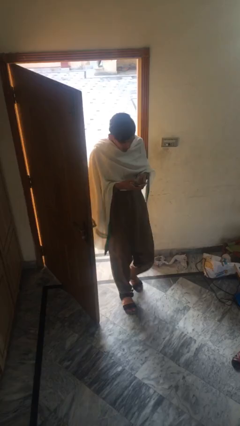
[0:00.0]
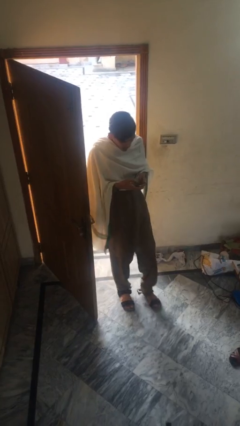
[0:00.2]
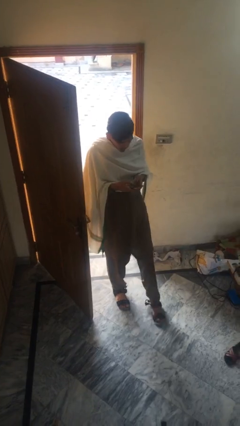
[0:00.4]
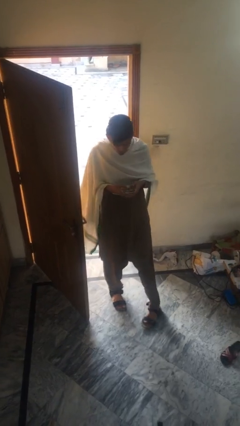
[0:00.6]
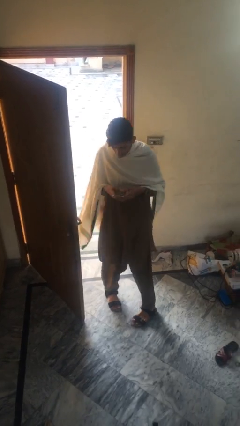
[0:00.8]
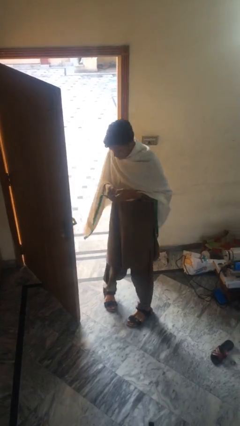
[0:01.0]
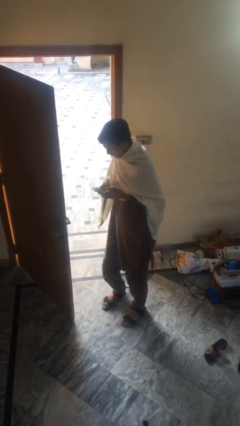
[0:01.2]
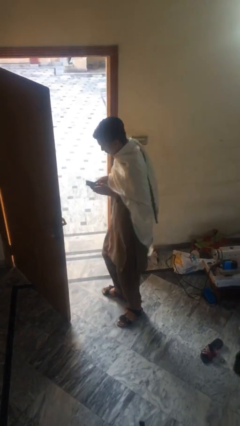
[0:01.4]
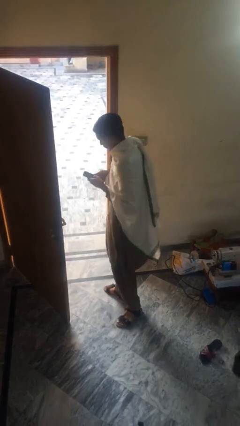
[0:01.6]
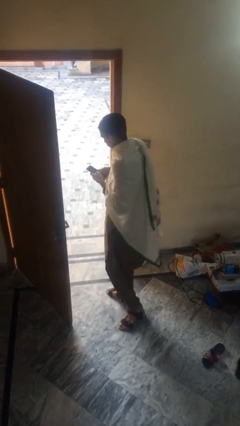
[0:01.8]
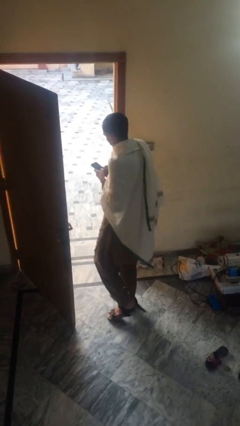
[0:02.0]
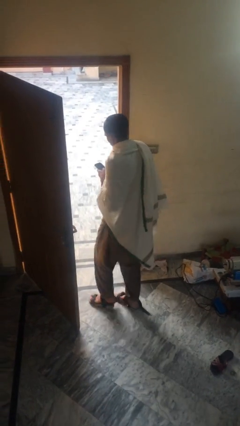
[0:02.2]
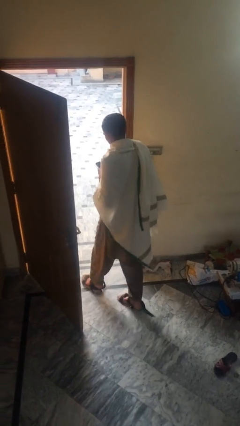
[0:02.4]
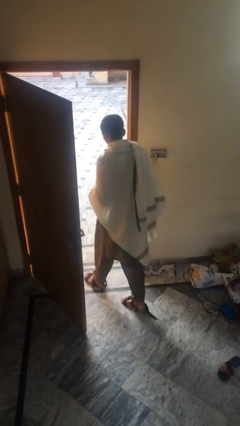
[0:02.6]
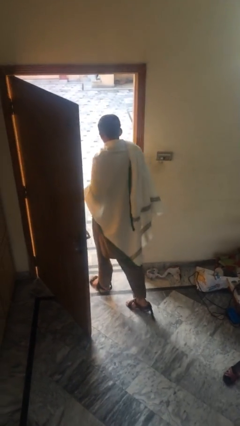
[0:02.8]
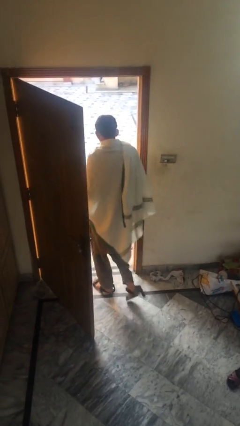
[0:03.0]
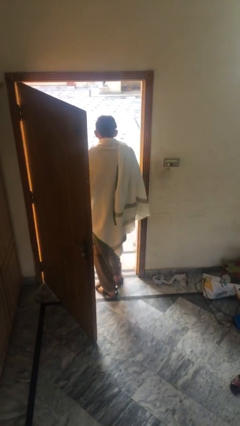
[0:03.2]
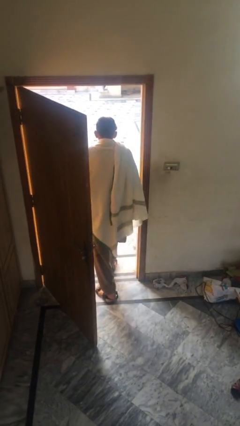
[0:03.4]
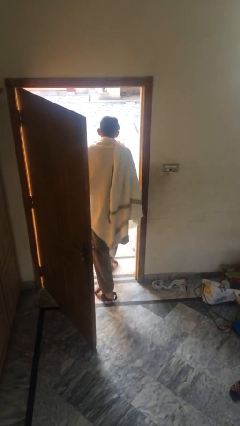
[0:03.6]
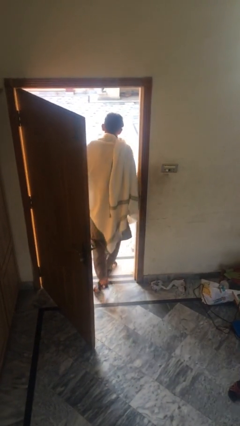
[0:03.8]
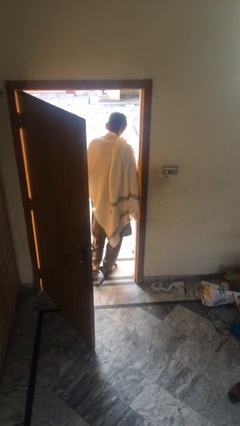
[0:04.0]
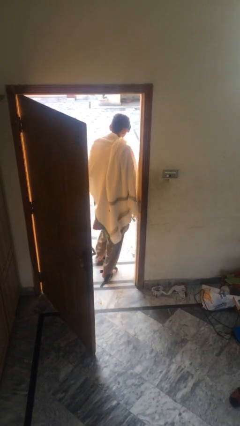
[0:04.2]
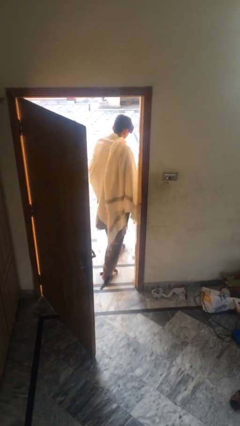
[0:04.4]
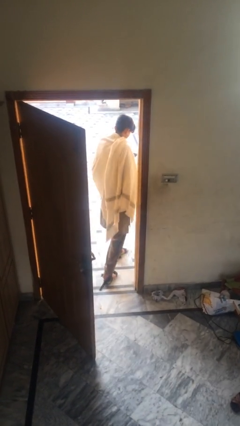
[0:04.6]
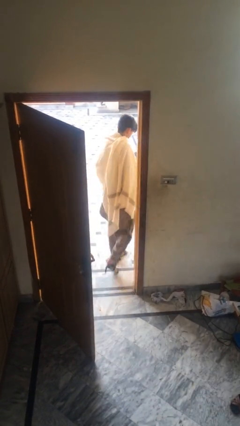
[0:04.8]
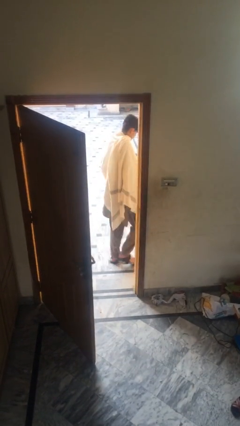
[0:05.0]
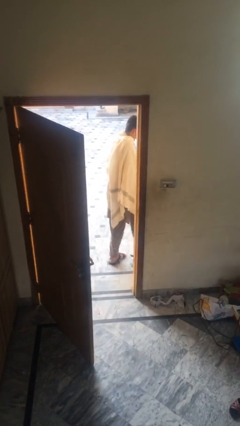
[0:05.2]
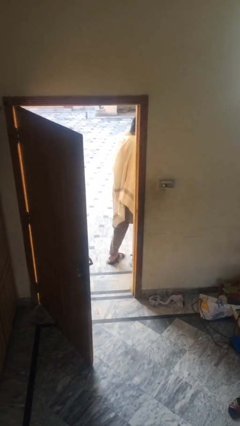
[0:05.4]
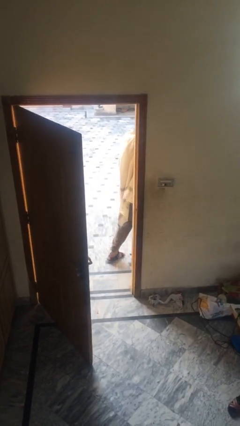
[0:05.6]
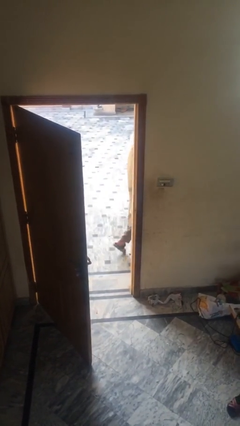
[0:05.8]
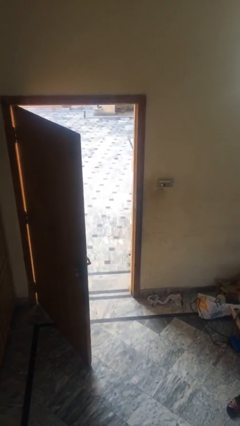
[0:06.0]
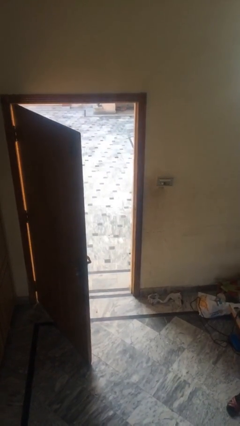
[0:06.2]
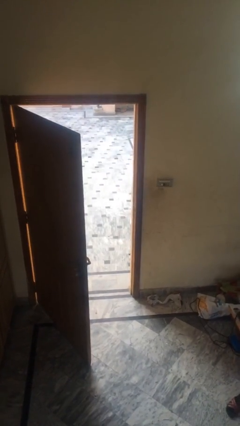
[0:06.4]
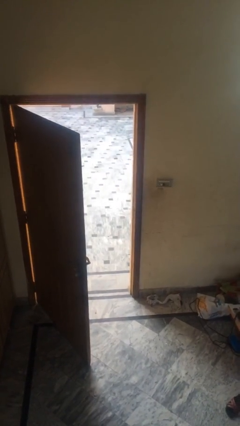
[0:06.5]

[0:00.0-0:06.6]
person exits scene through structure

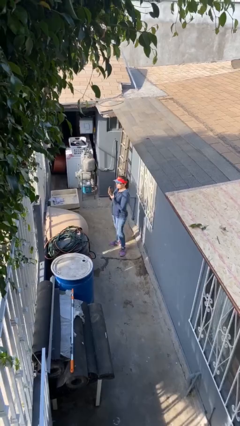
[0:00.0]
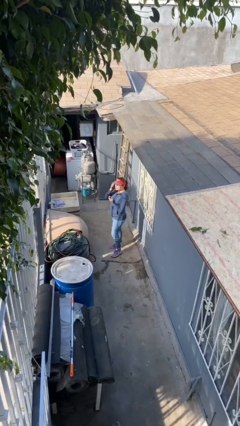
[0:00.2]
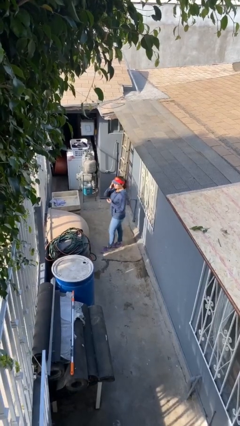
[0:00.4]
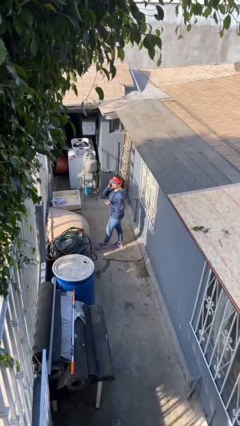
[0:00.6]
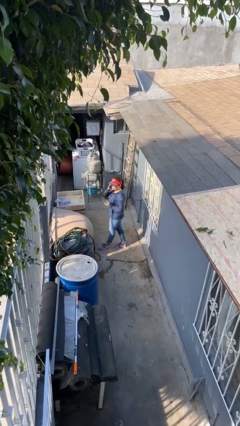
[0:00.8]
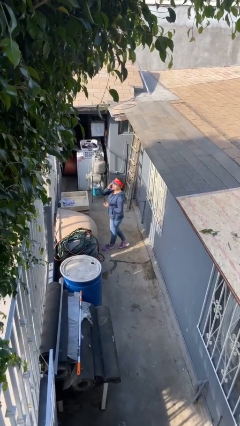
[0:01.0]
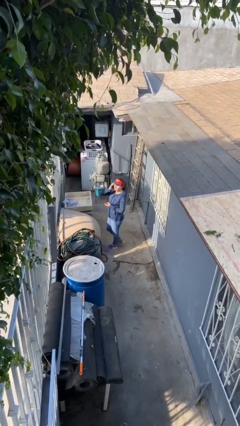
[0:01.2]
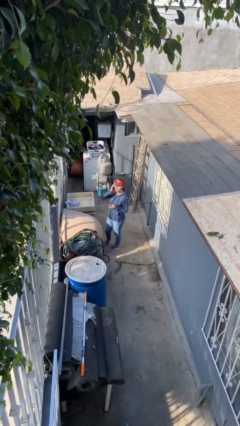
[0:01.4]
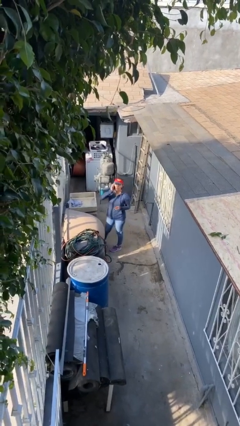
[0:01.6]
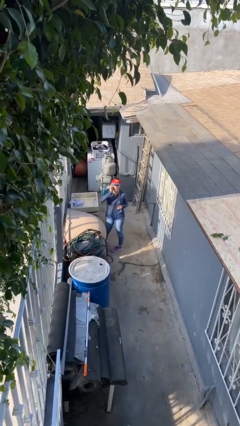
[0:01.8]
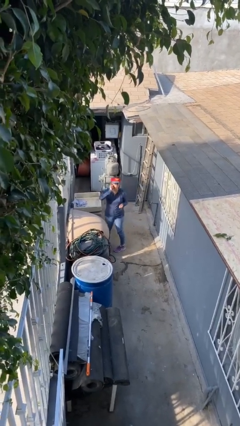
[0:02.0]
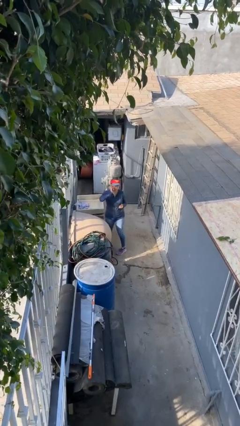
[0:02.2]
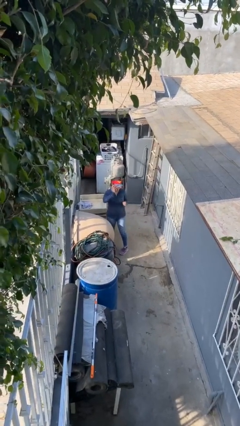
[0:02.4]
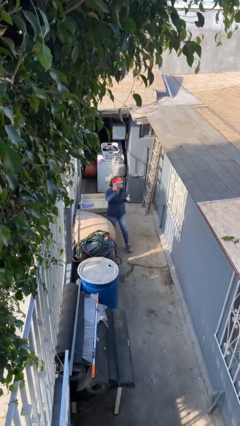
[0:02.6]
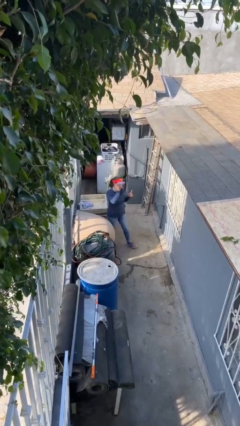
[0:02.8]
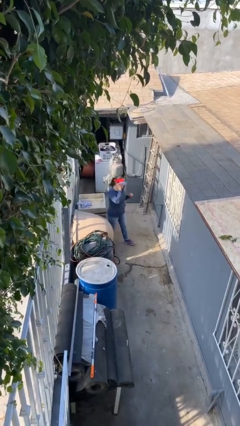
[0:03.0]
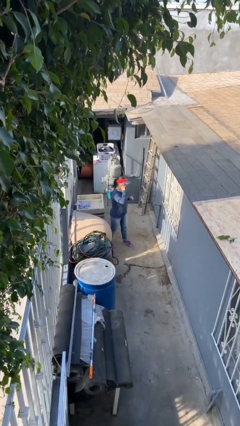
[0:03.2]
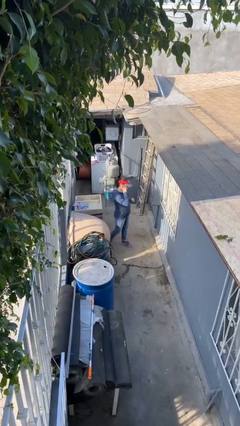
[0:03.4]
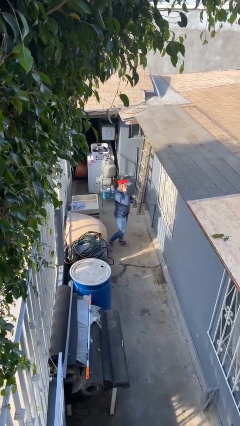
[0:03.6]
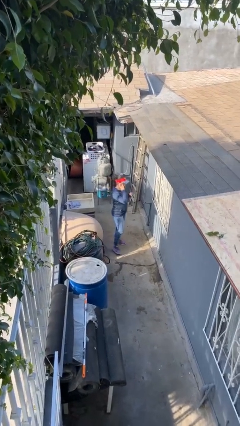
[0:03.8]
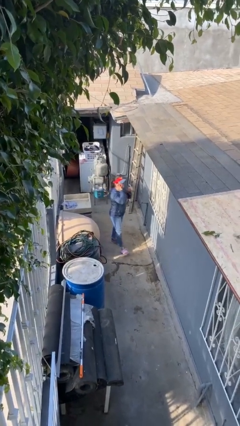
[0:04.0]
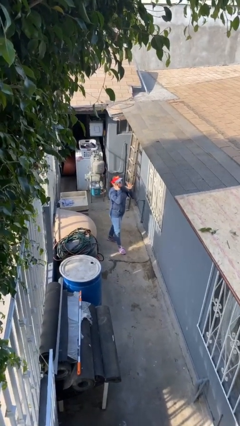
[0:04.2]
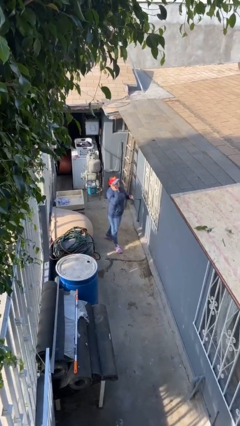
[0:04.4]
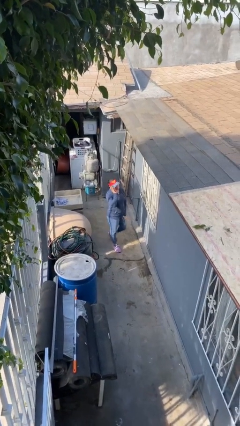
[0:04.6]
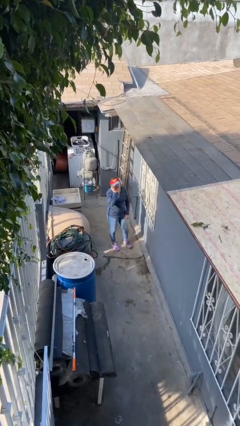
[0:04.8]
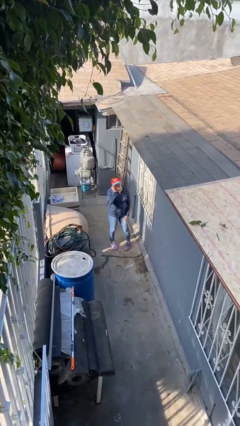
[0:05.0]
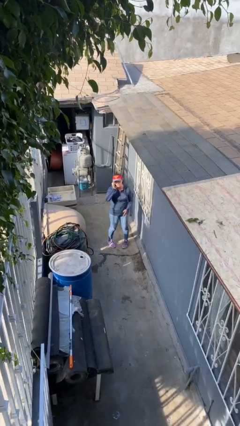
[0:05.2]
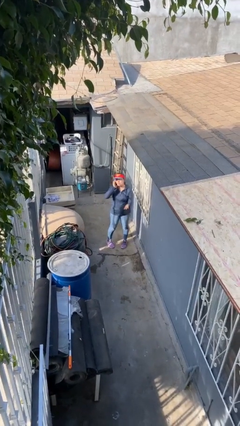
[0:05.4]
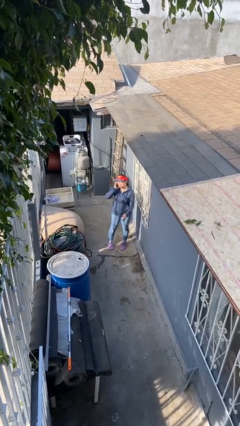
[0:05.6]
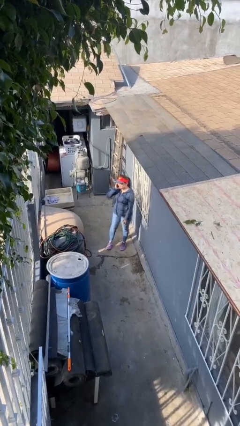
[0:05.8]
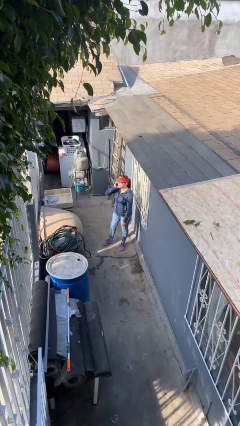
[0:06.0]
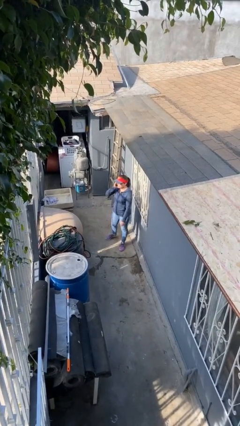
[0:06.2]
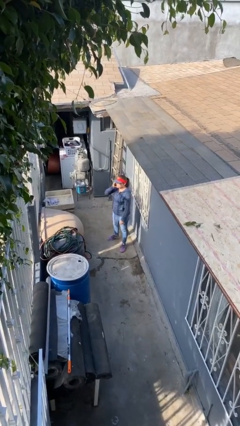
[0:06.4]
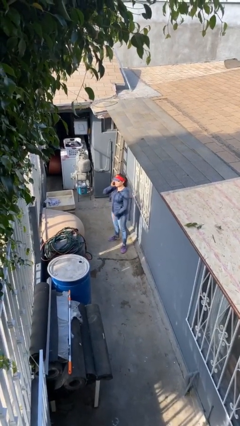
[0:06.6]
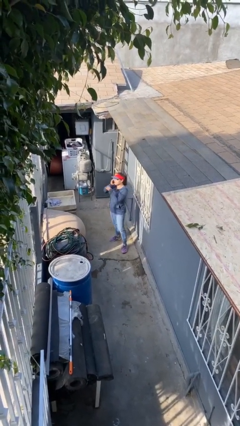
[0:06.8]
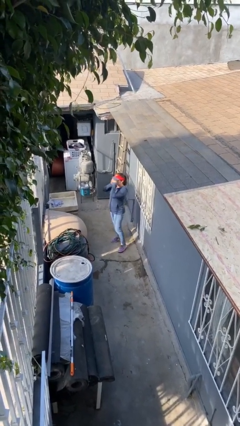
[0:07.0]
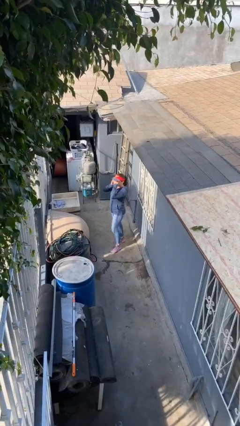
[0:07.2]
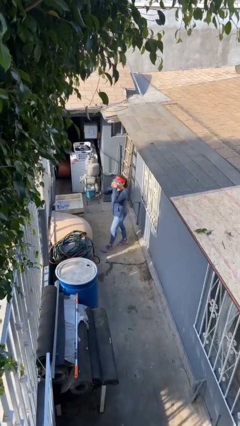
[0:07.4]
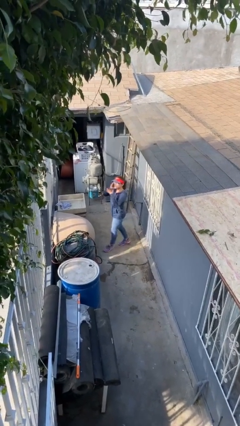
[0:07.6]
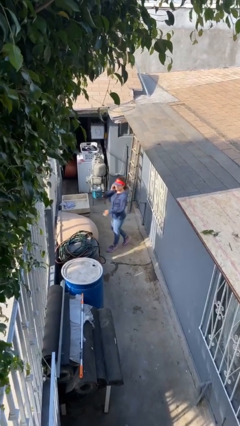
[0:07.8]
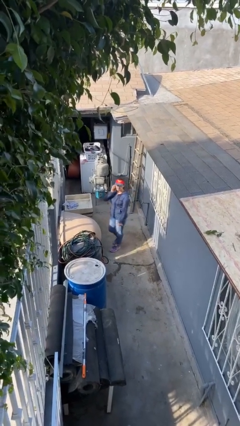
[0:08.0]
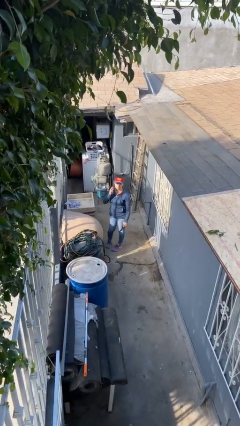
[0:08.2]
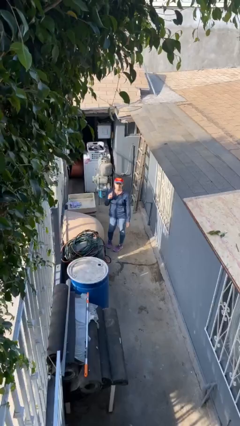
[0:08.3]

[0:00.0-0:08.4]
person talks on phone

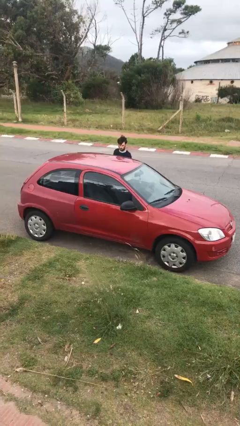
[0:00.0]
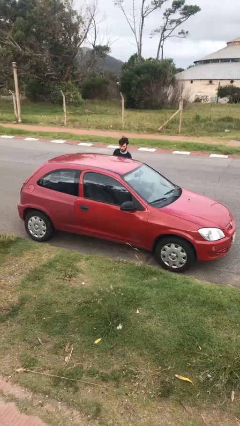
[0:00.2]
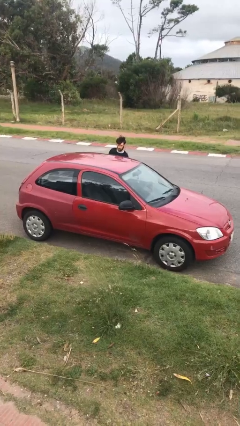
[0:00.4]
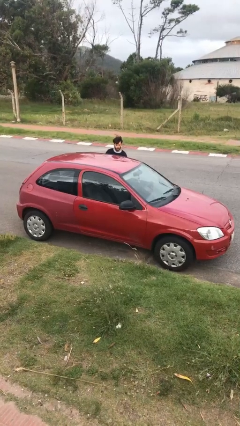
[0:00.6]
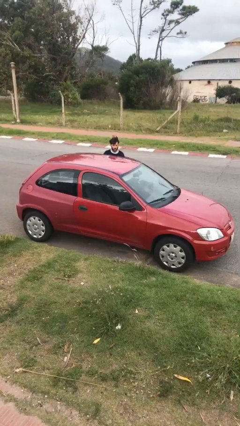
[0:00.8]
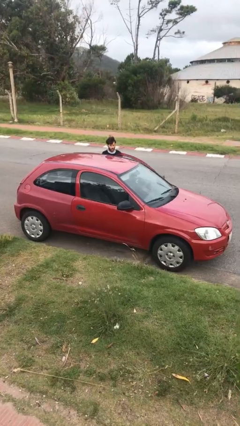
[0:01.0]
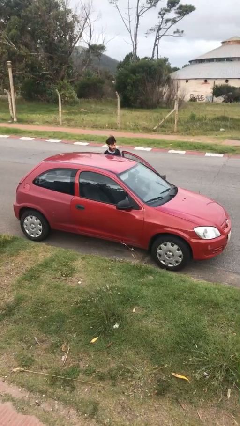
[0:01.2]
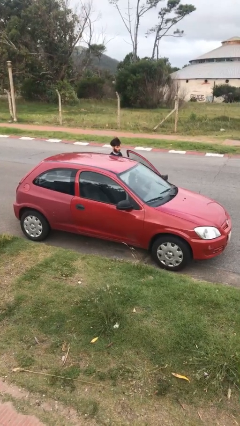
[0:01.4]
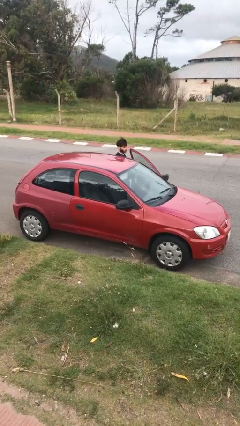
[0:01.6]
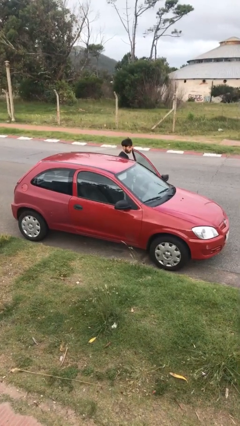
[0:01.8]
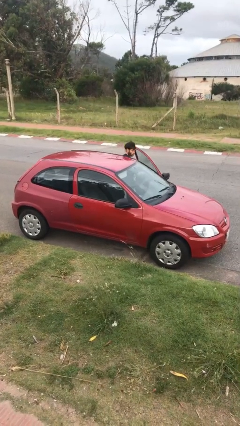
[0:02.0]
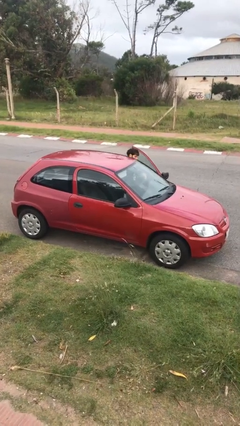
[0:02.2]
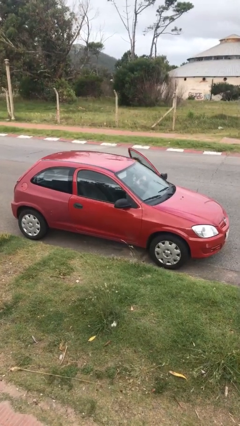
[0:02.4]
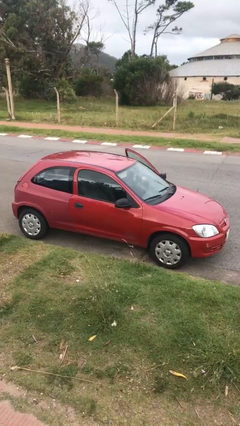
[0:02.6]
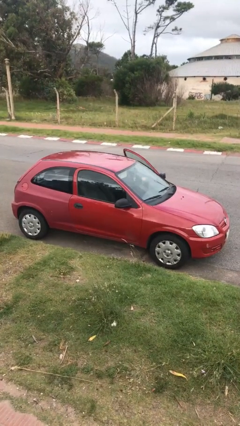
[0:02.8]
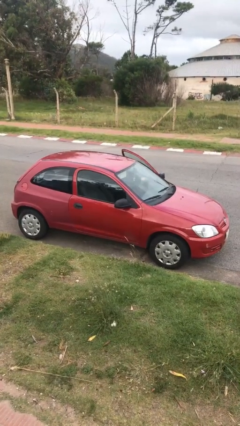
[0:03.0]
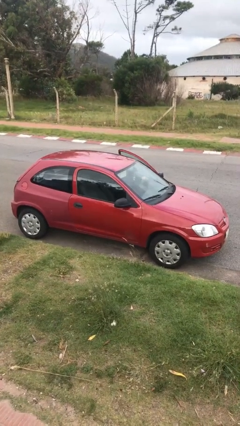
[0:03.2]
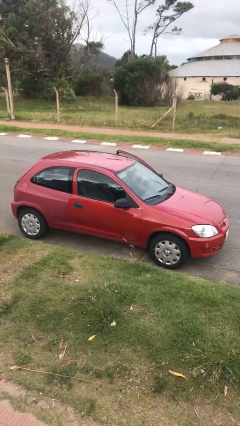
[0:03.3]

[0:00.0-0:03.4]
car picks up person
